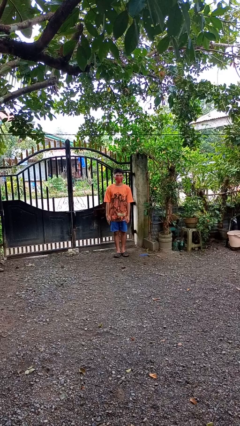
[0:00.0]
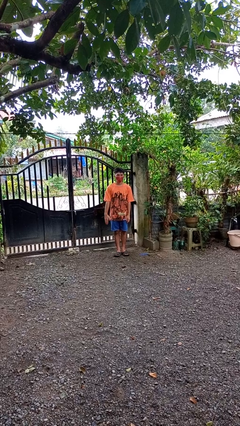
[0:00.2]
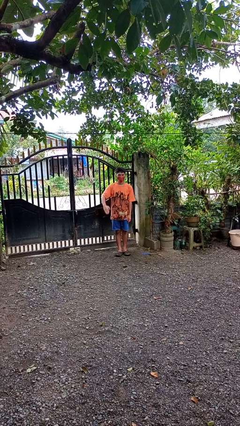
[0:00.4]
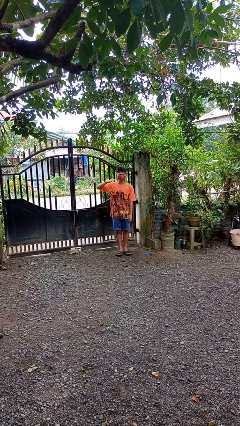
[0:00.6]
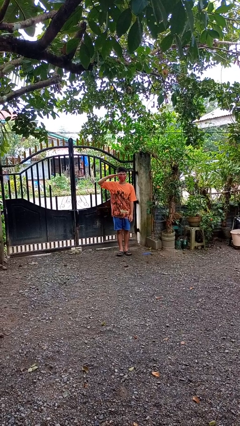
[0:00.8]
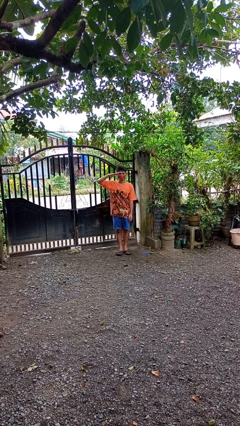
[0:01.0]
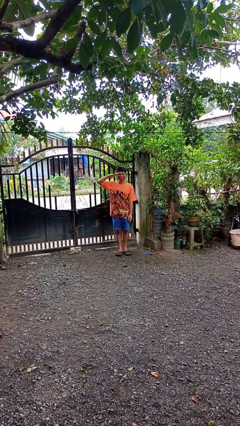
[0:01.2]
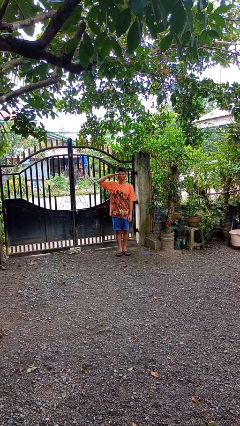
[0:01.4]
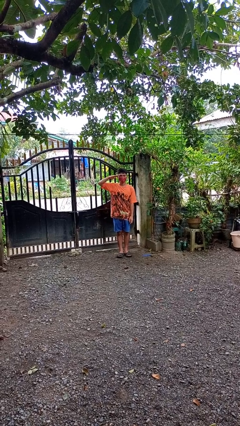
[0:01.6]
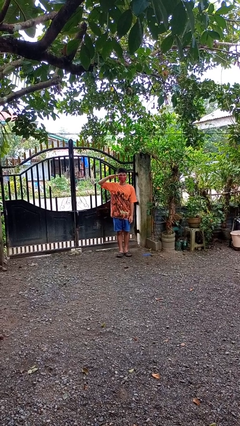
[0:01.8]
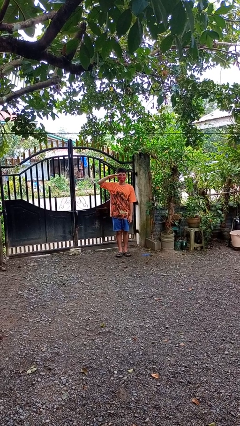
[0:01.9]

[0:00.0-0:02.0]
person salutes

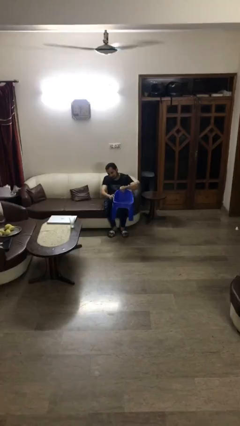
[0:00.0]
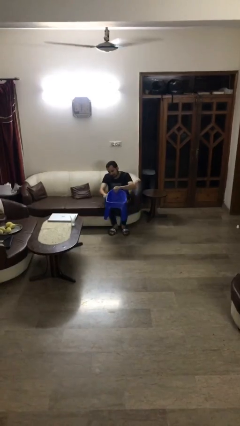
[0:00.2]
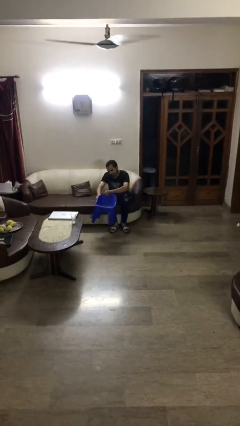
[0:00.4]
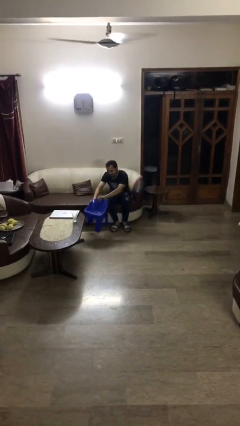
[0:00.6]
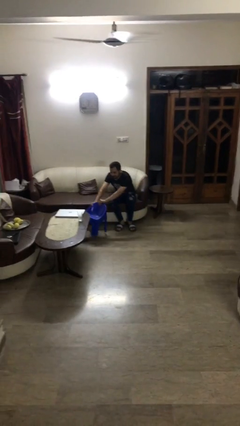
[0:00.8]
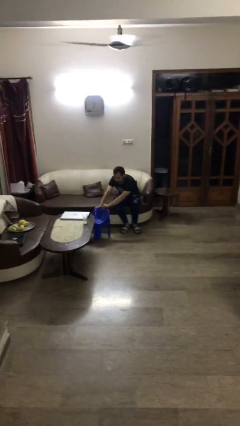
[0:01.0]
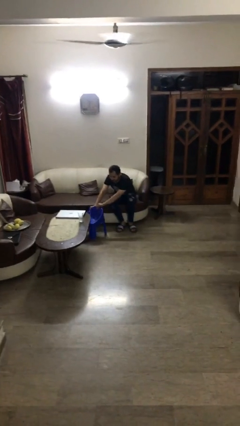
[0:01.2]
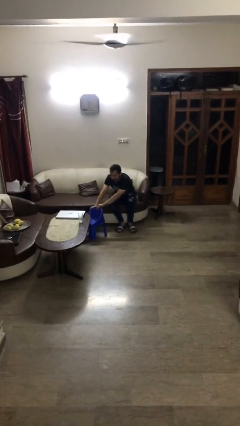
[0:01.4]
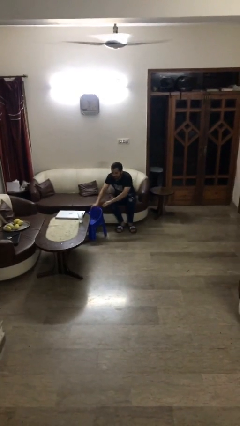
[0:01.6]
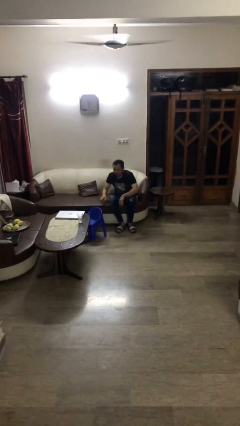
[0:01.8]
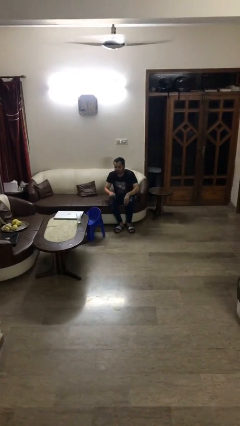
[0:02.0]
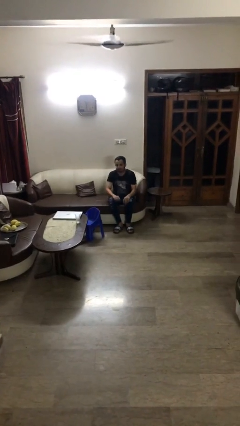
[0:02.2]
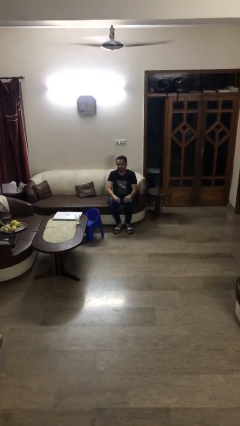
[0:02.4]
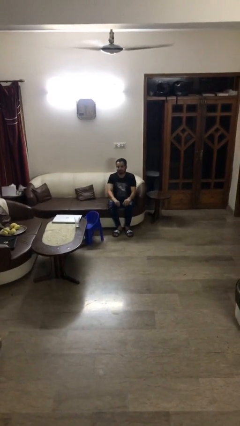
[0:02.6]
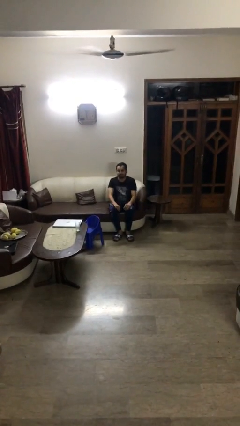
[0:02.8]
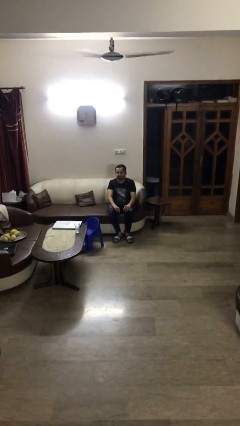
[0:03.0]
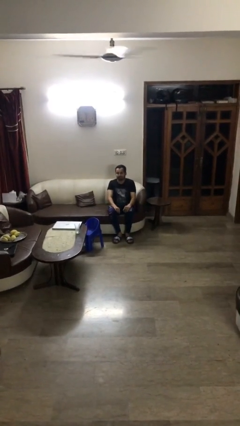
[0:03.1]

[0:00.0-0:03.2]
person puts down object on floor

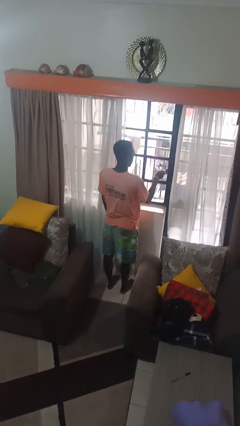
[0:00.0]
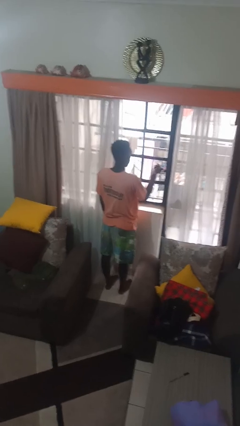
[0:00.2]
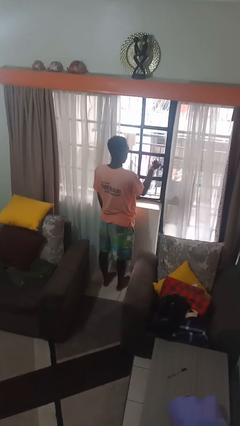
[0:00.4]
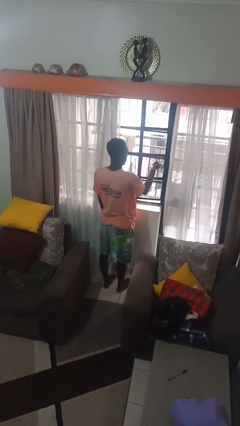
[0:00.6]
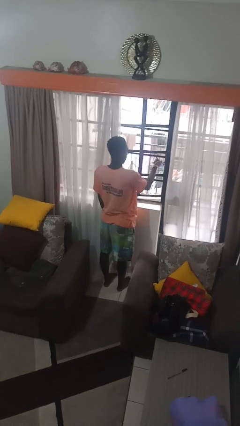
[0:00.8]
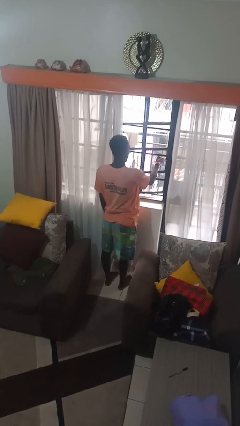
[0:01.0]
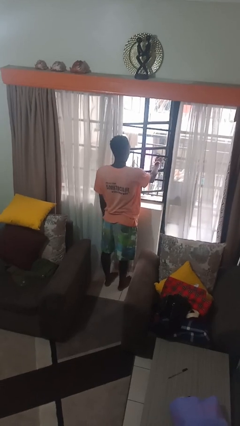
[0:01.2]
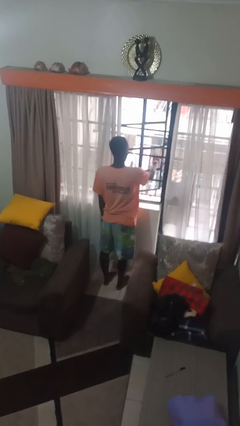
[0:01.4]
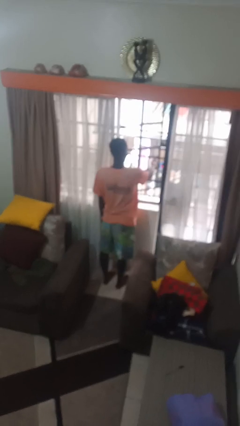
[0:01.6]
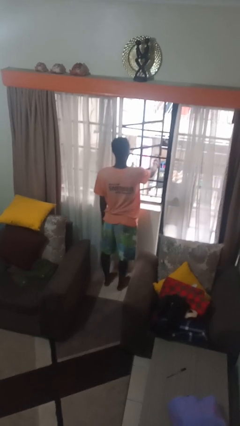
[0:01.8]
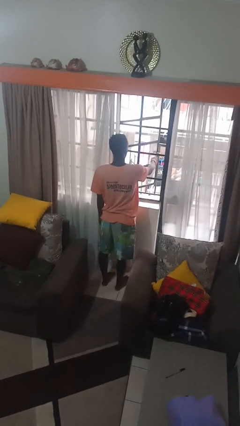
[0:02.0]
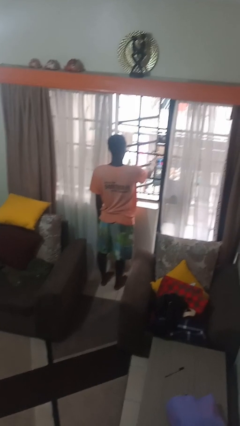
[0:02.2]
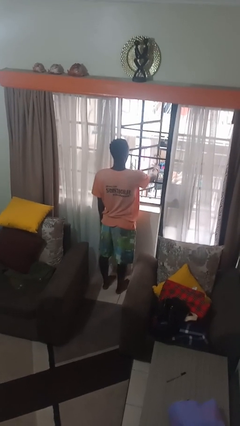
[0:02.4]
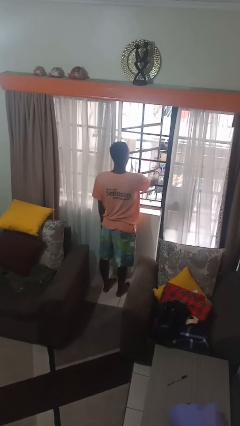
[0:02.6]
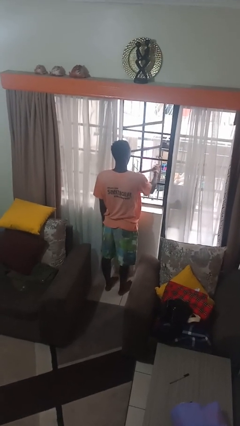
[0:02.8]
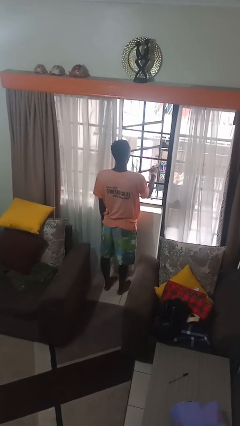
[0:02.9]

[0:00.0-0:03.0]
person opens home window

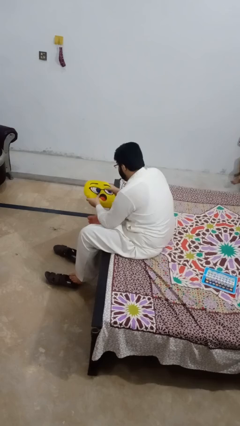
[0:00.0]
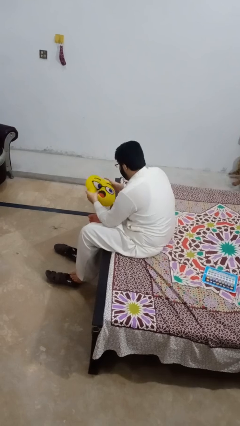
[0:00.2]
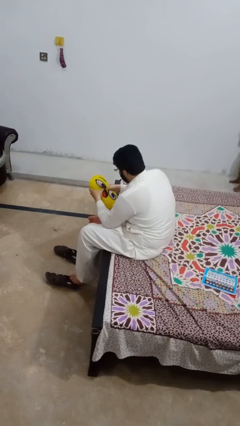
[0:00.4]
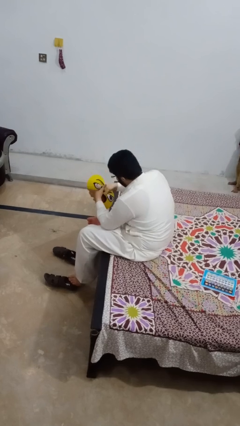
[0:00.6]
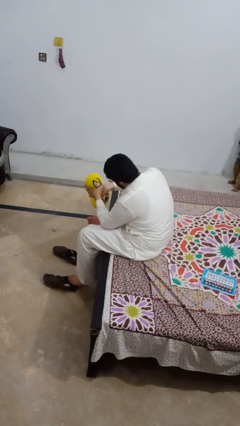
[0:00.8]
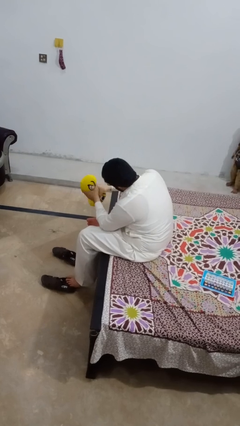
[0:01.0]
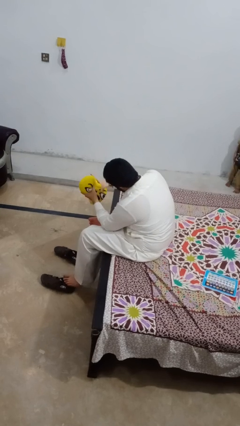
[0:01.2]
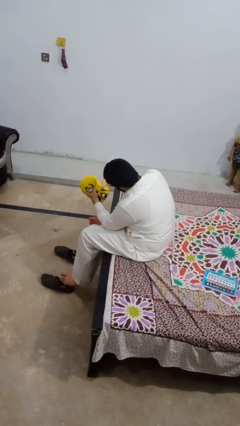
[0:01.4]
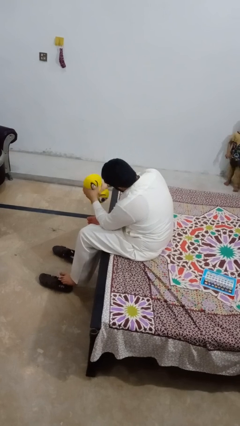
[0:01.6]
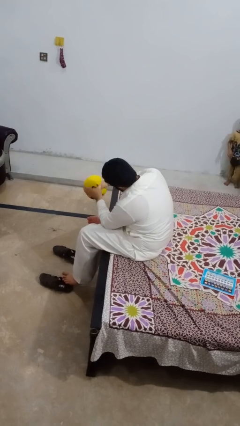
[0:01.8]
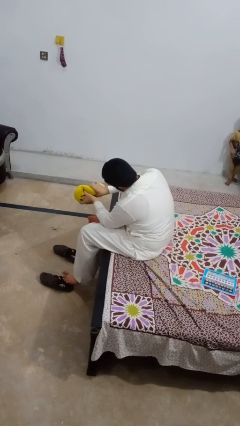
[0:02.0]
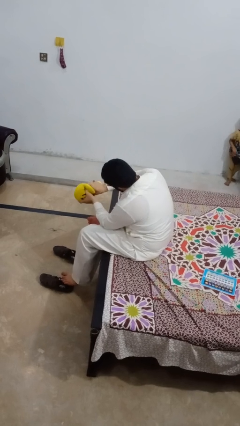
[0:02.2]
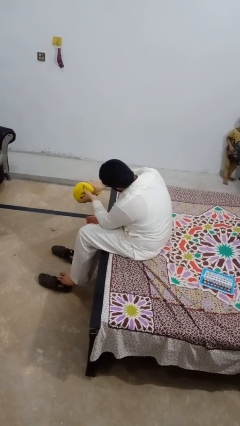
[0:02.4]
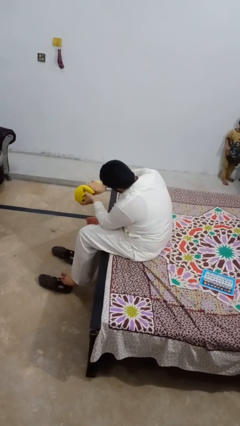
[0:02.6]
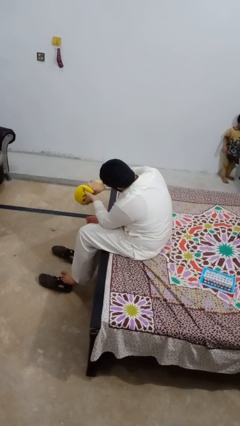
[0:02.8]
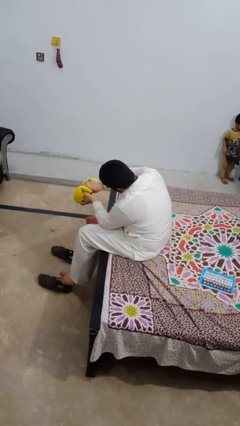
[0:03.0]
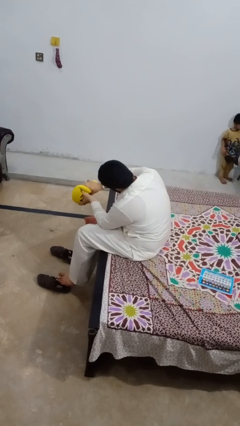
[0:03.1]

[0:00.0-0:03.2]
person squeezes object

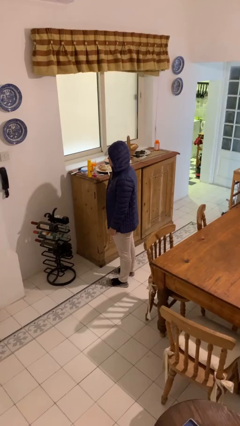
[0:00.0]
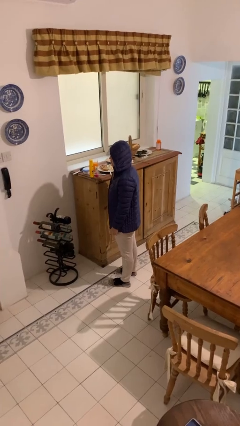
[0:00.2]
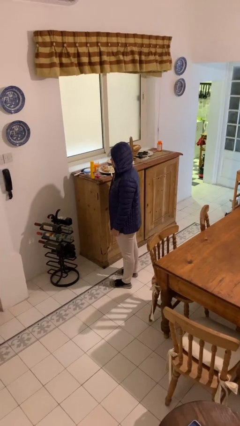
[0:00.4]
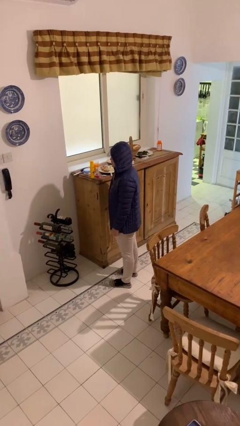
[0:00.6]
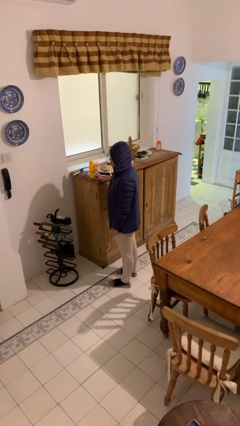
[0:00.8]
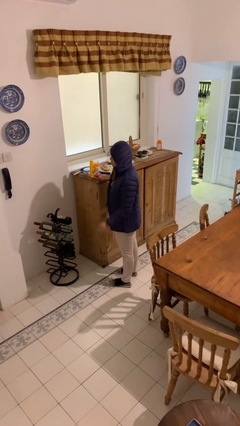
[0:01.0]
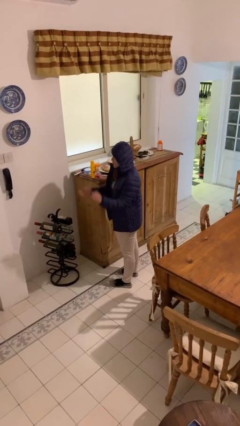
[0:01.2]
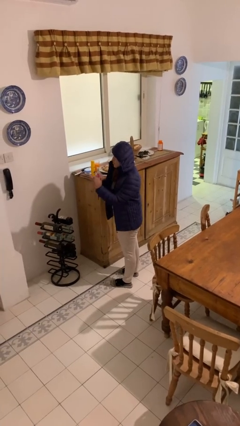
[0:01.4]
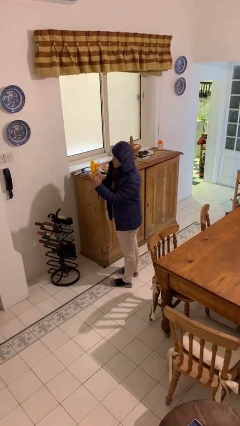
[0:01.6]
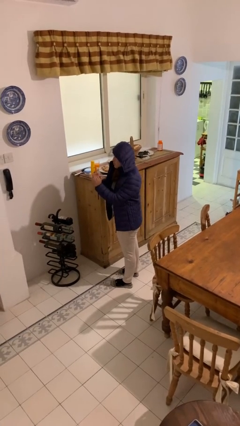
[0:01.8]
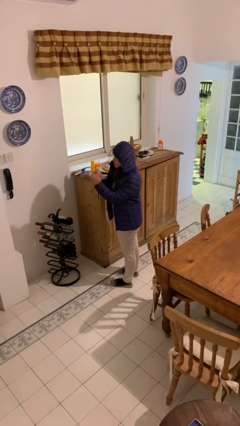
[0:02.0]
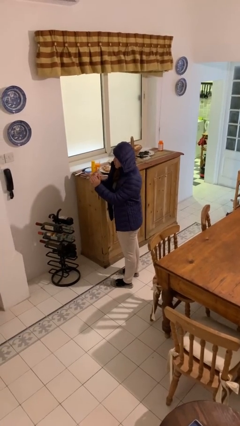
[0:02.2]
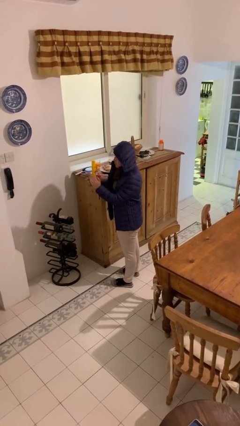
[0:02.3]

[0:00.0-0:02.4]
person claps hands

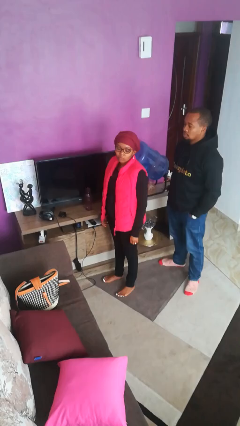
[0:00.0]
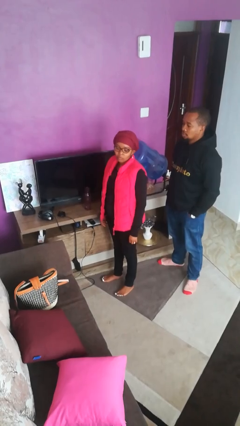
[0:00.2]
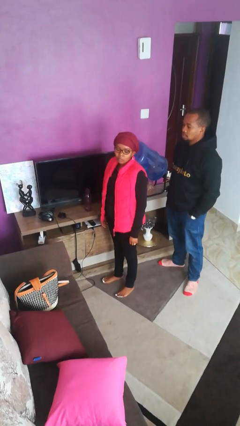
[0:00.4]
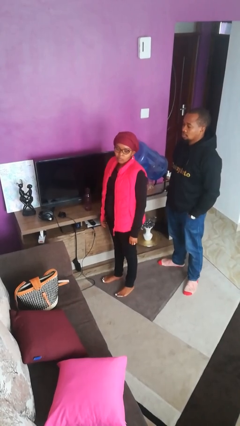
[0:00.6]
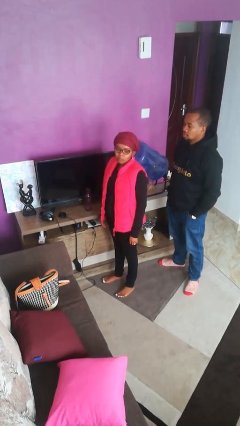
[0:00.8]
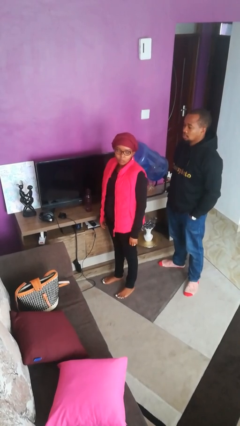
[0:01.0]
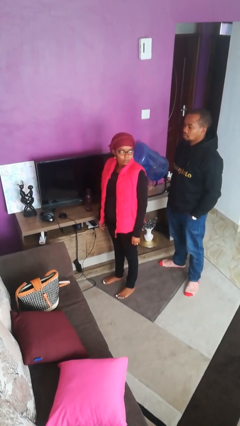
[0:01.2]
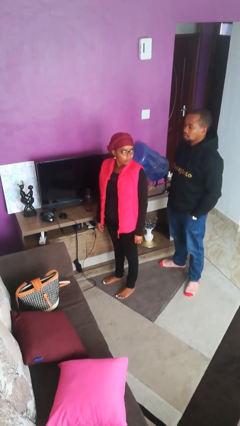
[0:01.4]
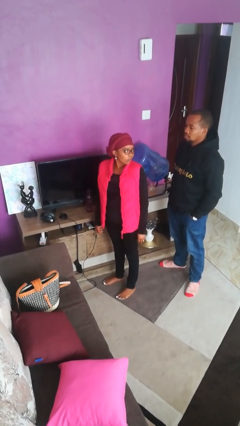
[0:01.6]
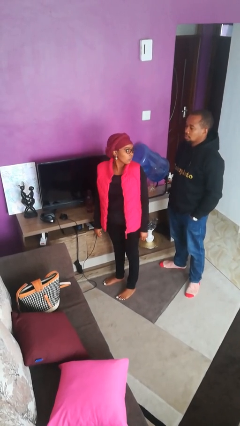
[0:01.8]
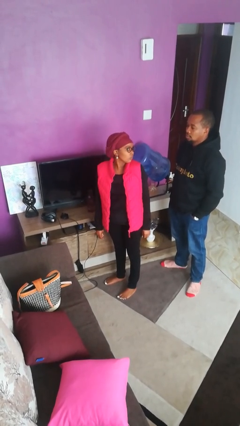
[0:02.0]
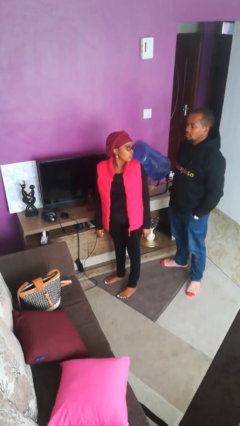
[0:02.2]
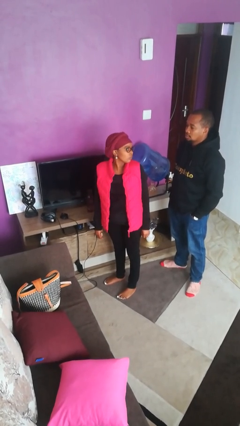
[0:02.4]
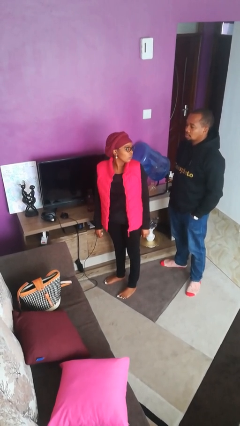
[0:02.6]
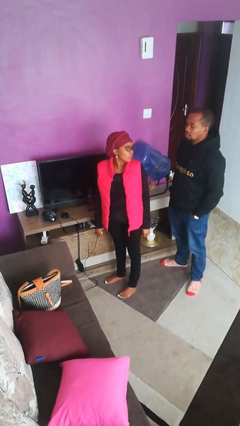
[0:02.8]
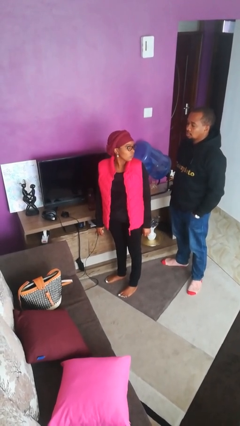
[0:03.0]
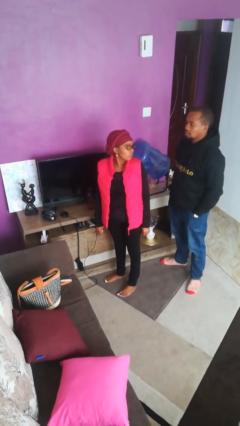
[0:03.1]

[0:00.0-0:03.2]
person looks over shoulder
